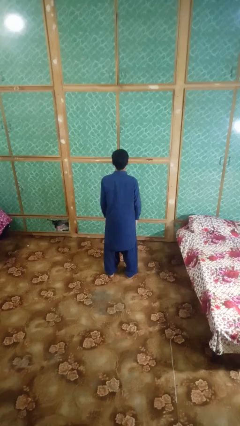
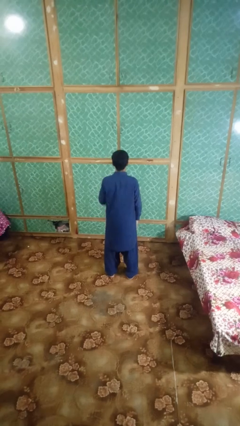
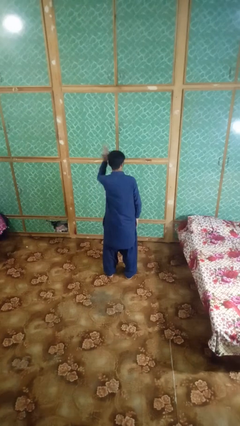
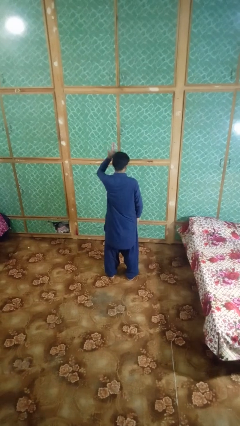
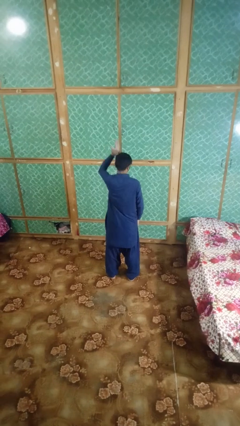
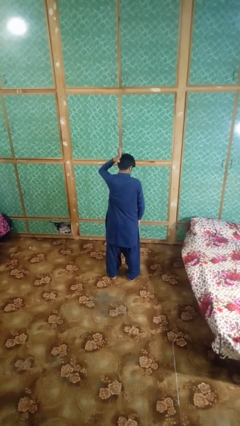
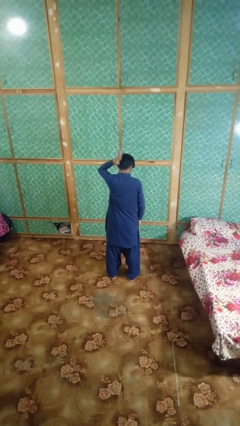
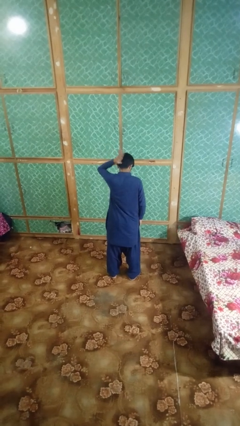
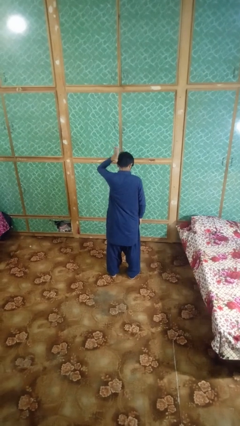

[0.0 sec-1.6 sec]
person pats head

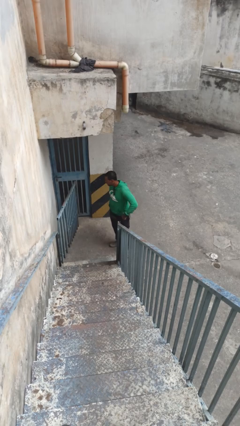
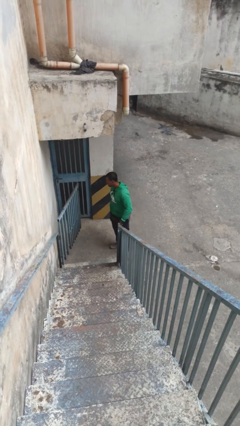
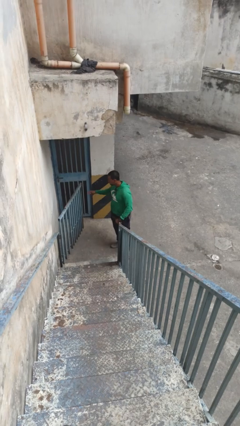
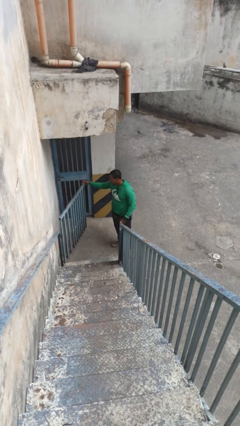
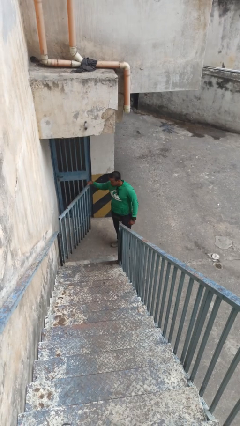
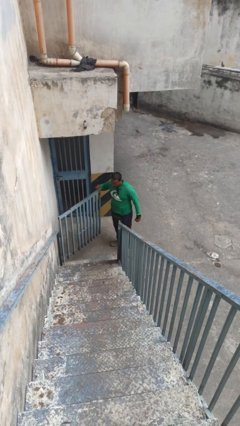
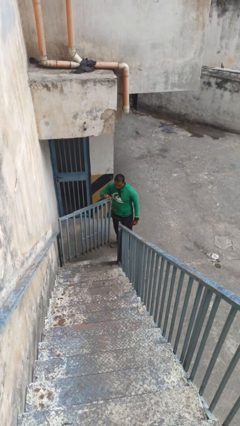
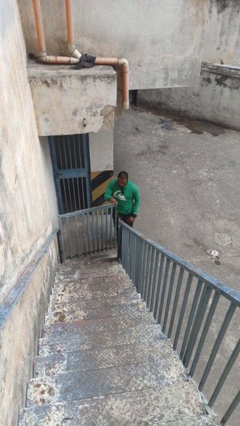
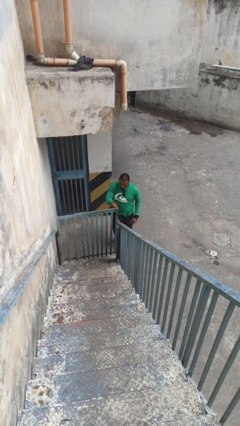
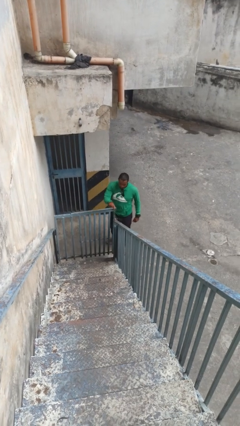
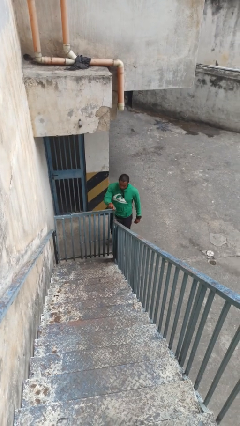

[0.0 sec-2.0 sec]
person closes facility door

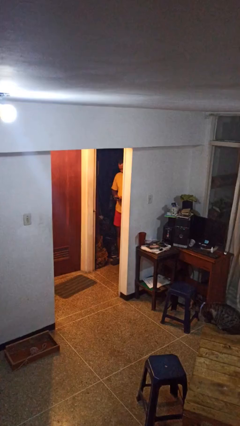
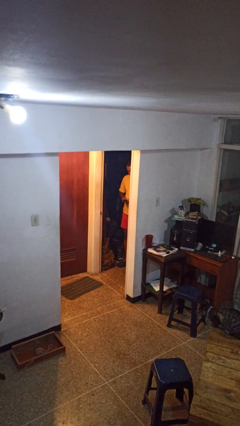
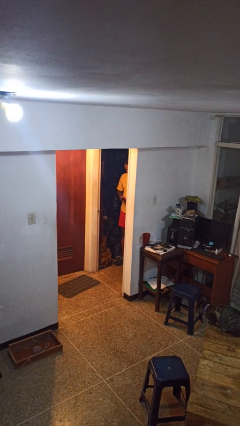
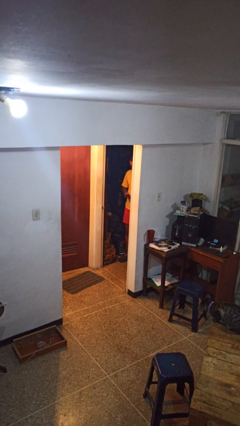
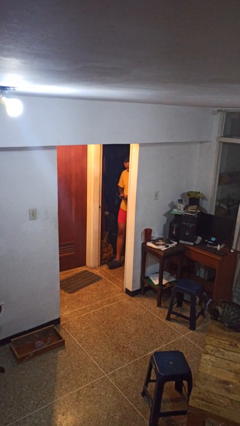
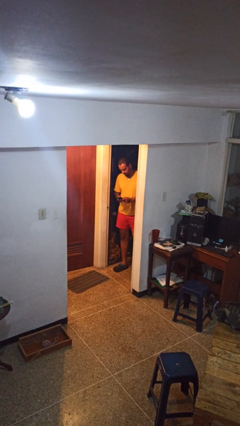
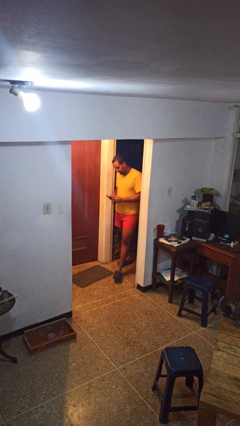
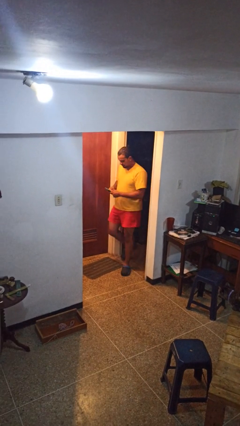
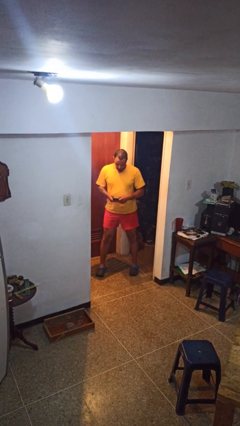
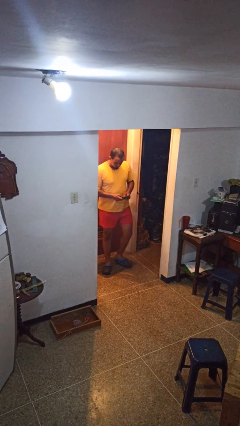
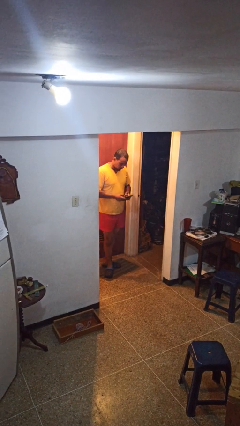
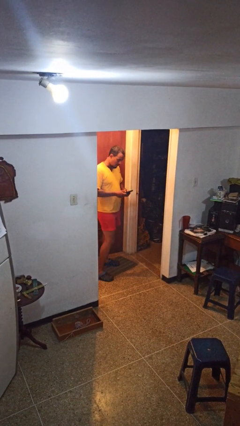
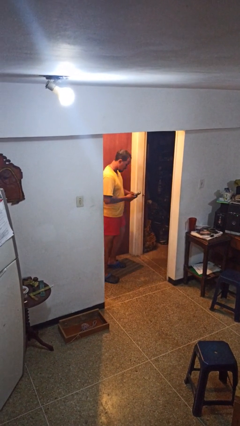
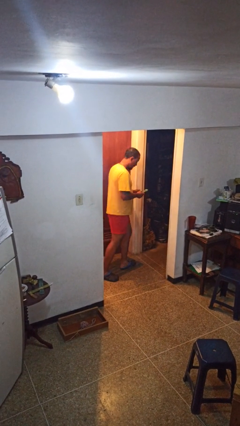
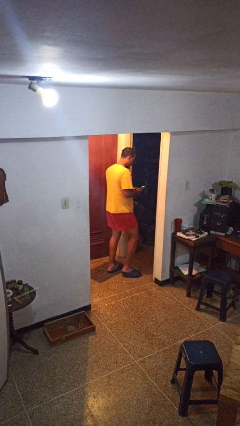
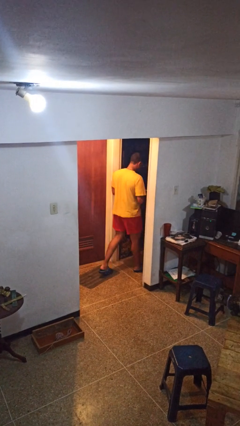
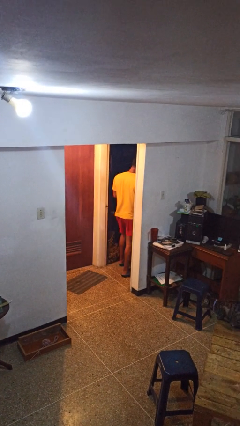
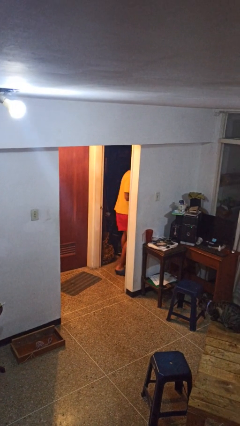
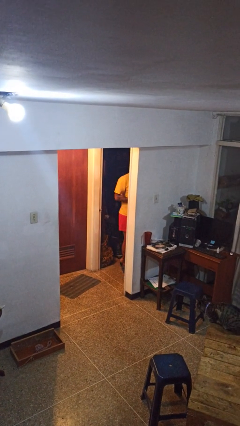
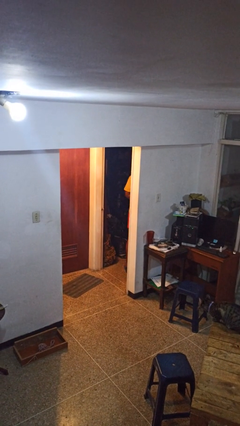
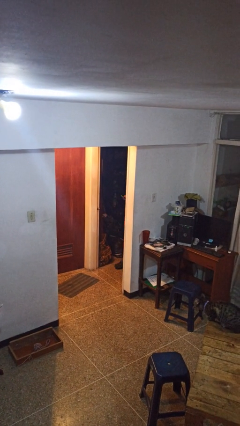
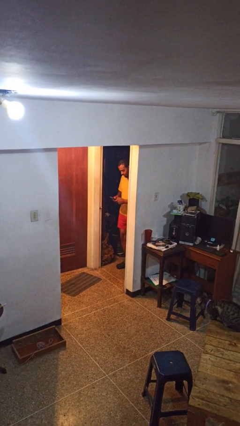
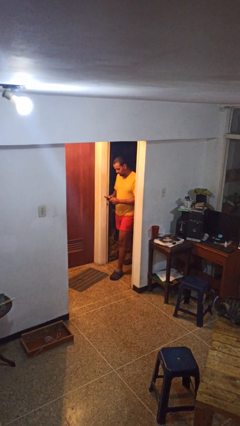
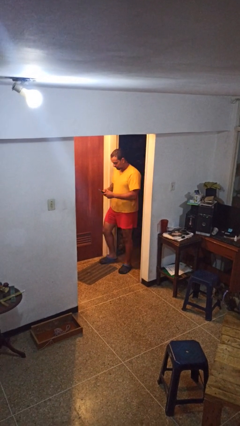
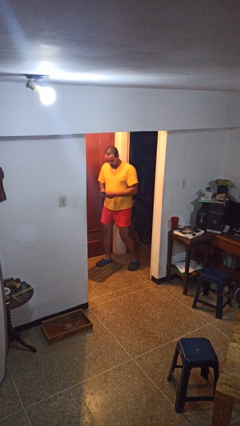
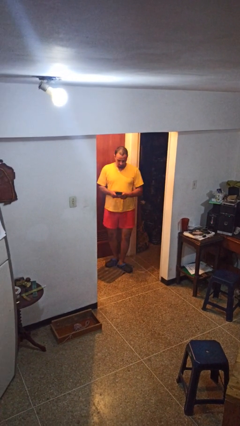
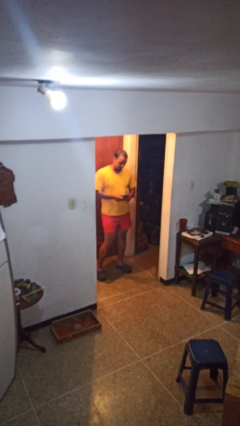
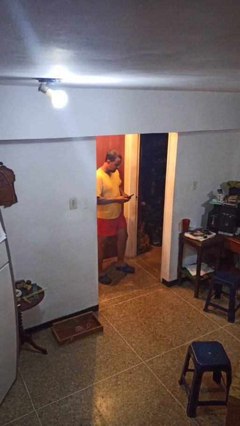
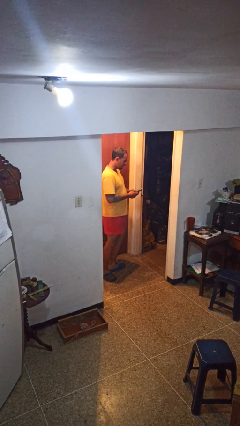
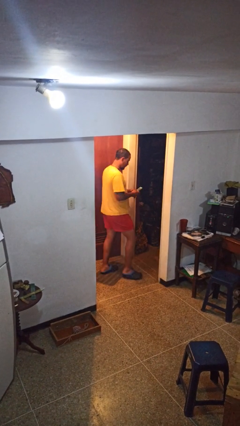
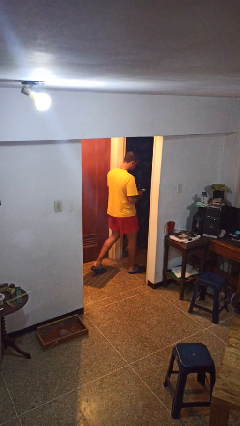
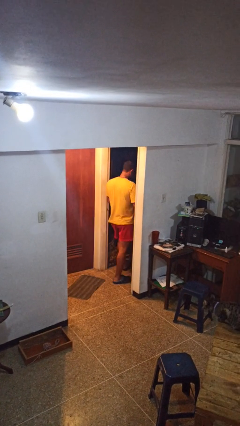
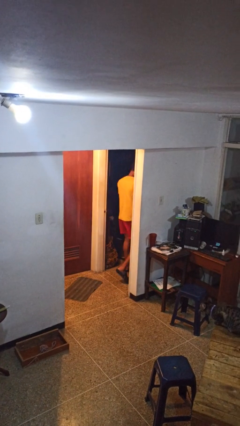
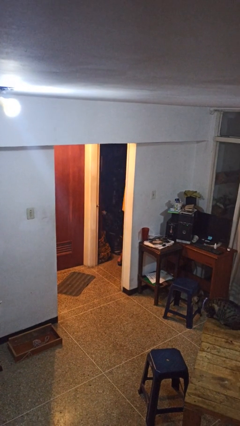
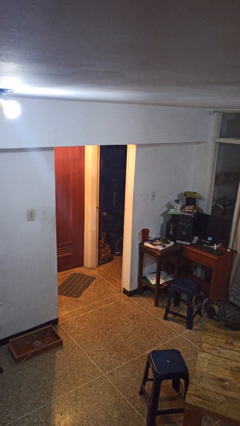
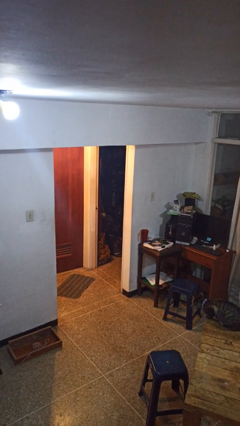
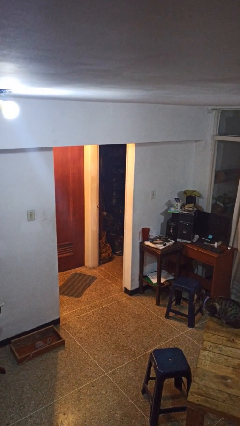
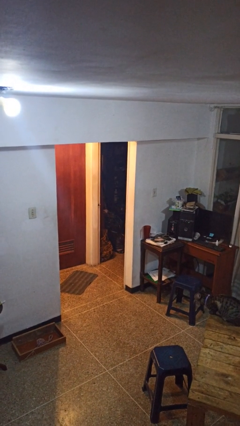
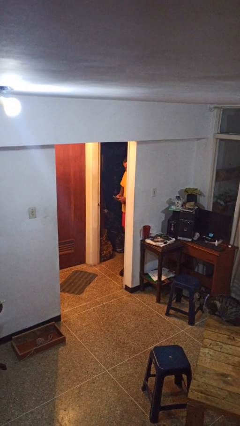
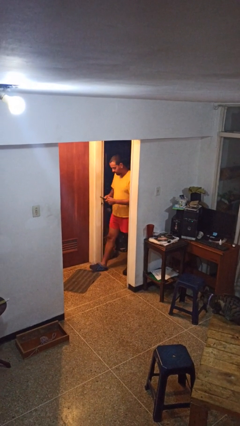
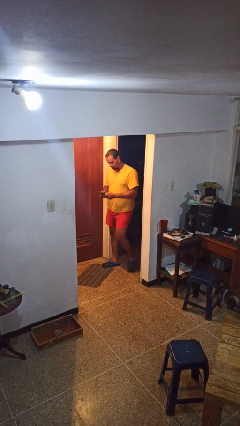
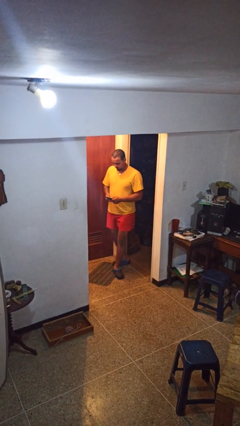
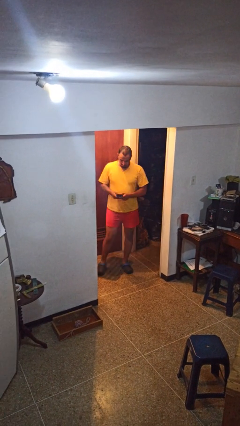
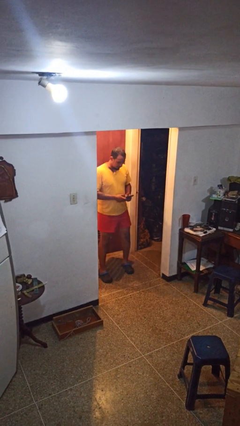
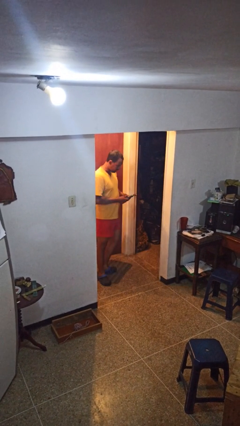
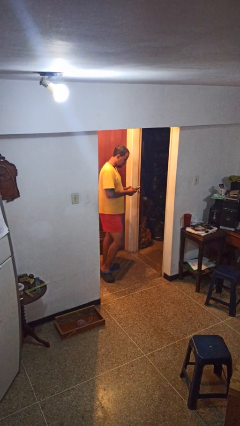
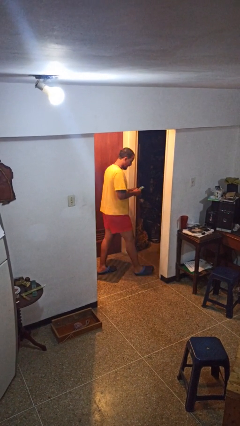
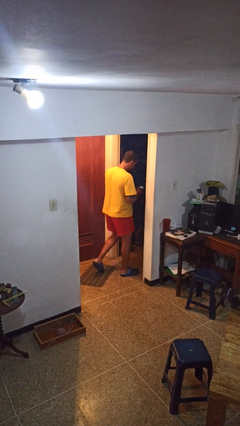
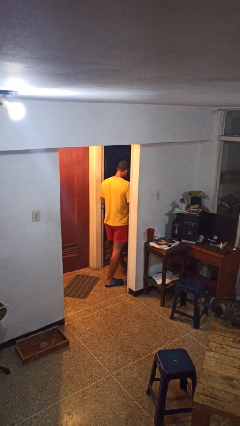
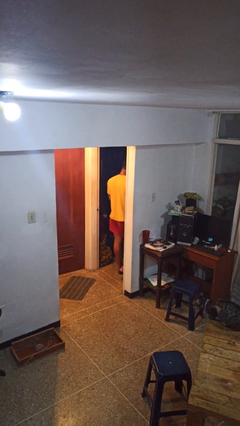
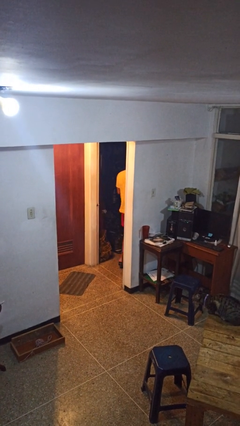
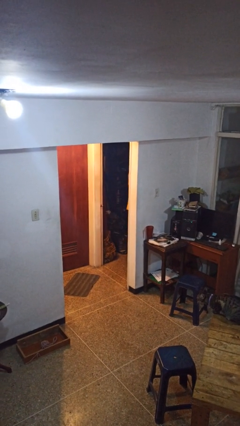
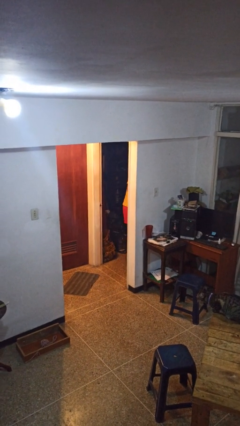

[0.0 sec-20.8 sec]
person texts on phone

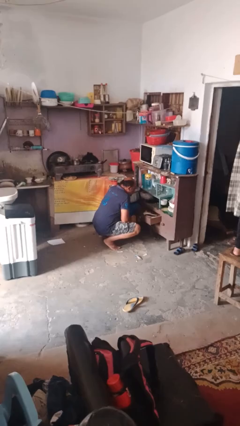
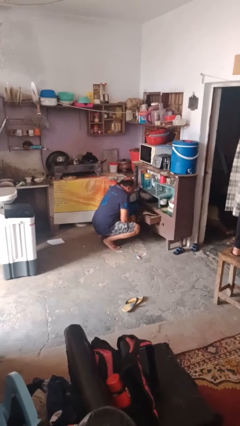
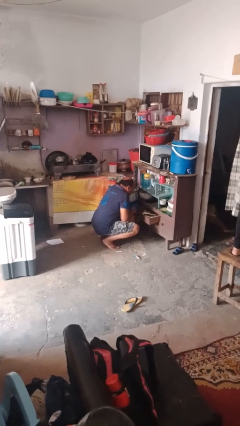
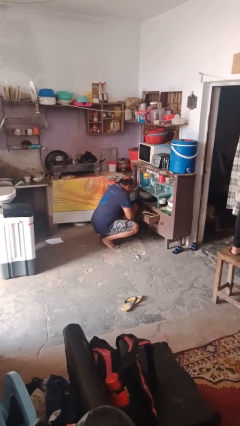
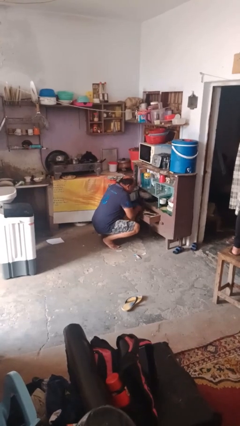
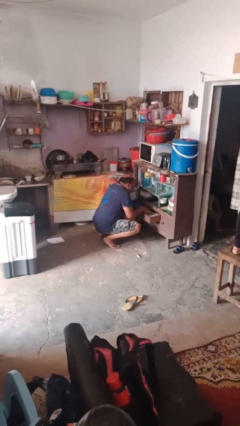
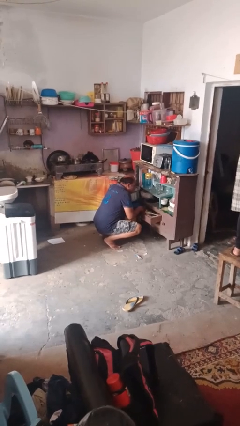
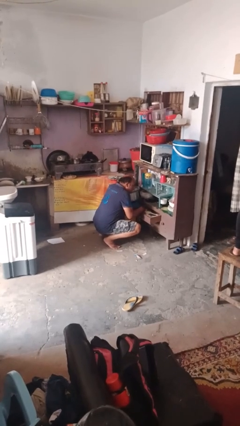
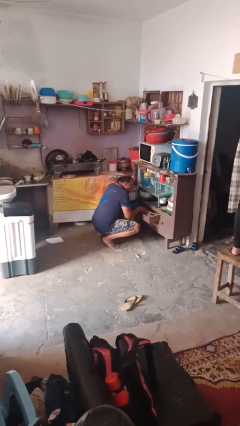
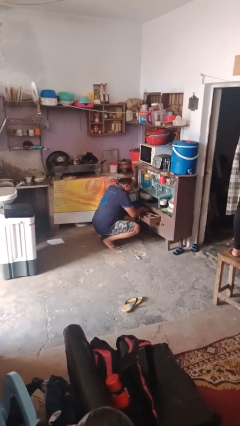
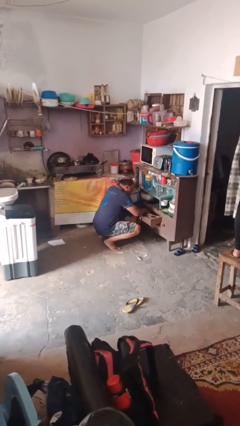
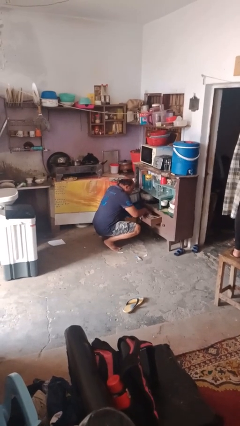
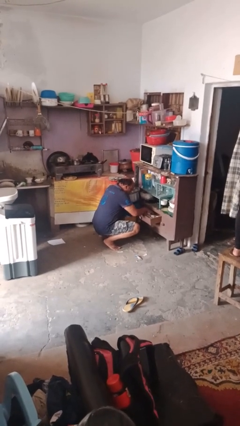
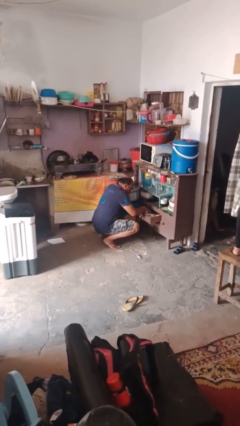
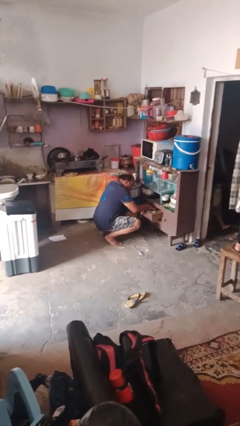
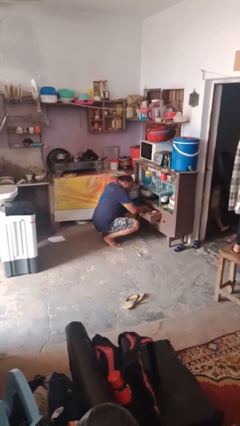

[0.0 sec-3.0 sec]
person searches in kitchen drawer

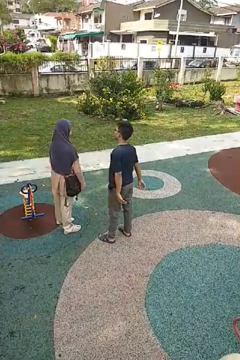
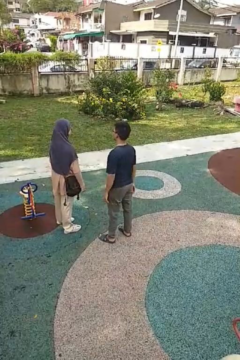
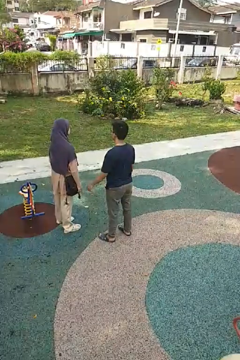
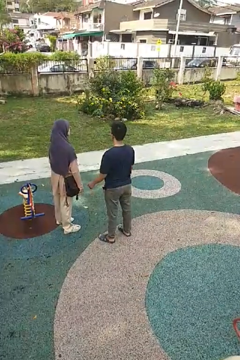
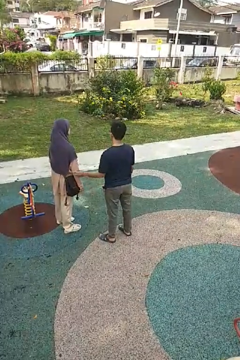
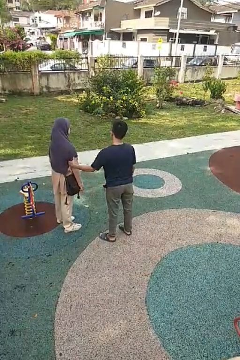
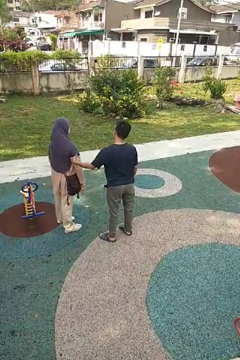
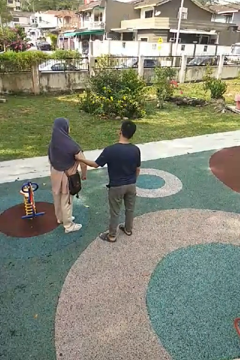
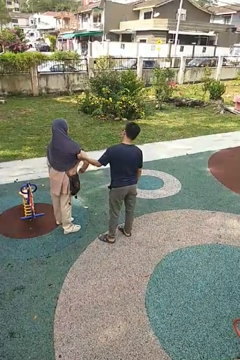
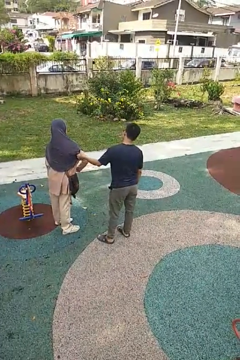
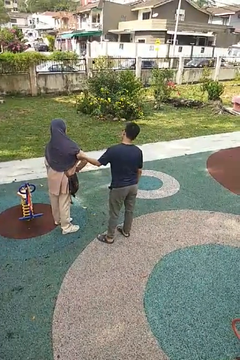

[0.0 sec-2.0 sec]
person grabs person by bicep
